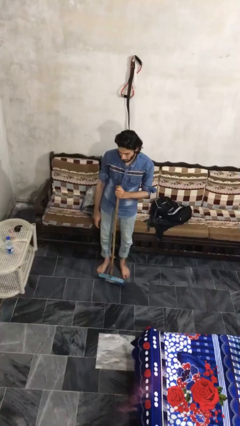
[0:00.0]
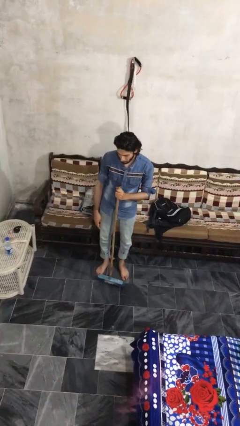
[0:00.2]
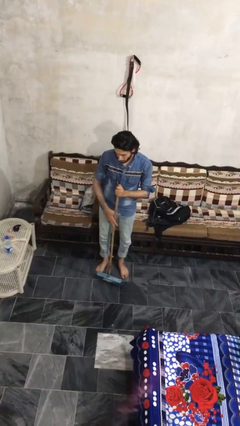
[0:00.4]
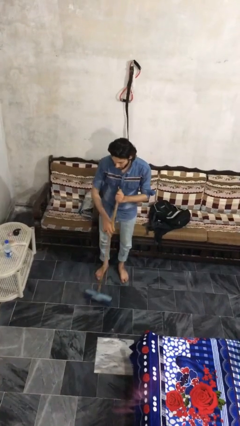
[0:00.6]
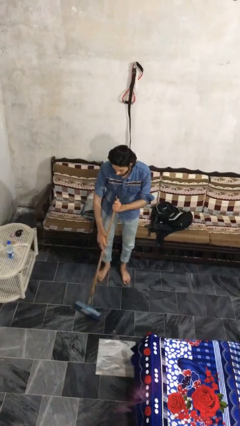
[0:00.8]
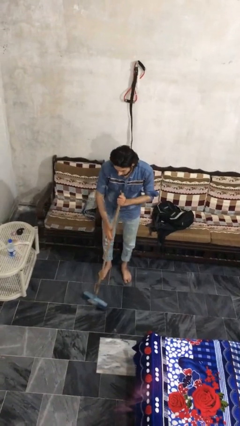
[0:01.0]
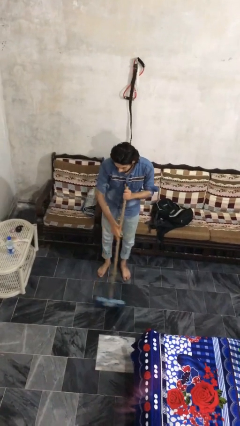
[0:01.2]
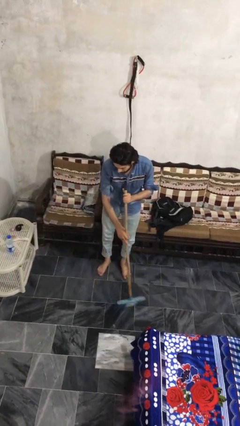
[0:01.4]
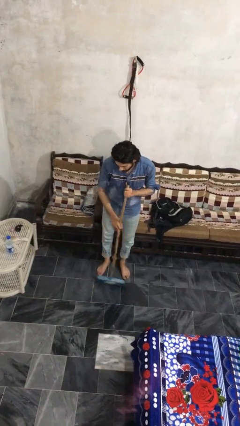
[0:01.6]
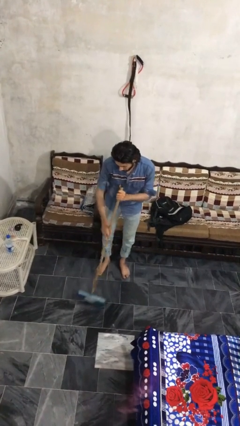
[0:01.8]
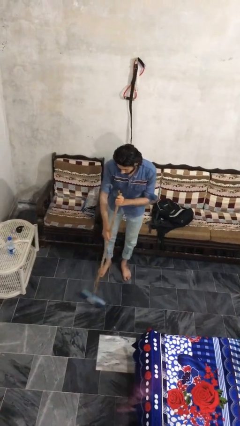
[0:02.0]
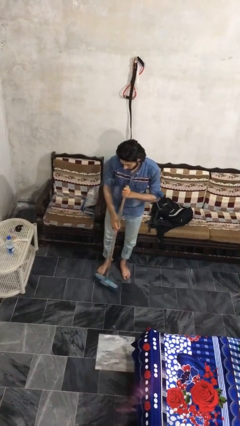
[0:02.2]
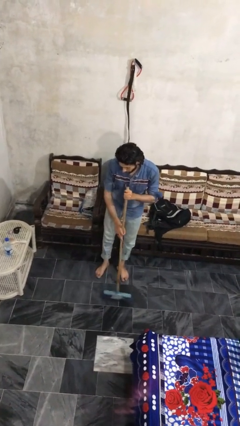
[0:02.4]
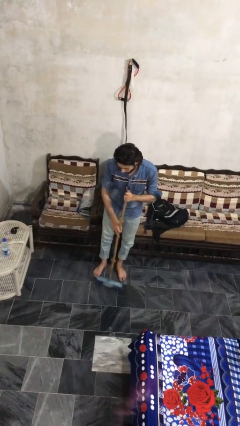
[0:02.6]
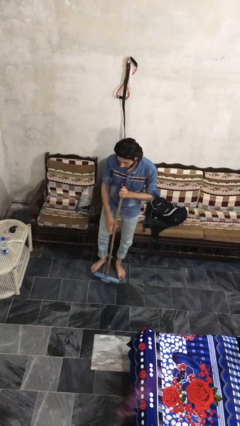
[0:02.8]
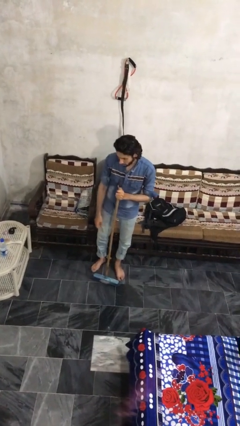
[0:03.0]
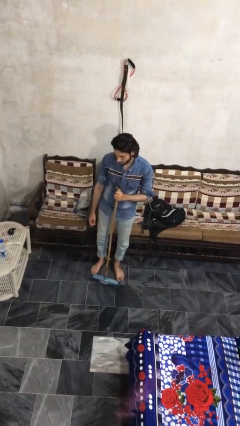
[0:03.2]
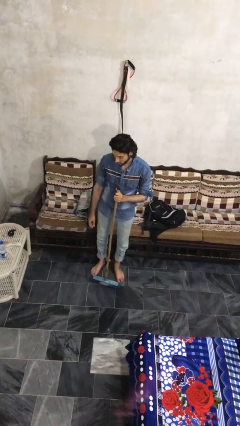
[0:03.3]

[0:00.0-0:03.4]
person sweeps floor

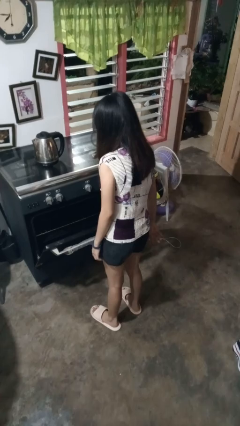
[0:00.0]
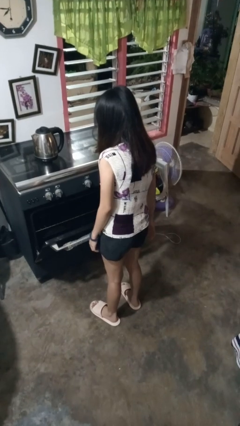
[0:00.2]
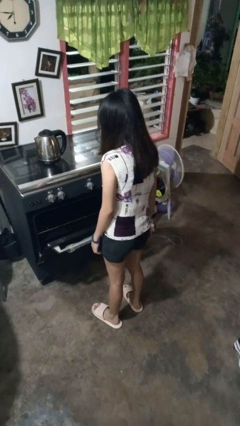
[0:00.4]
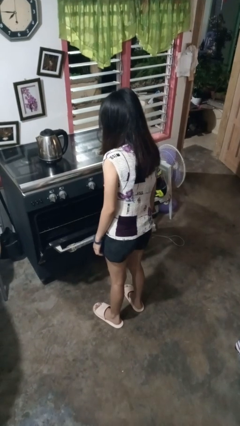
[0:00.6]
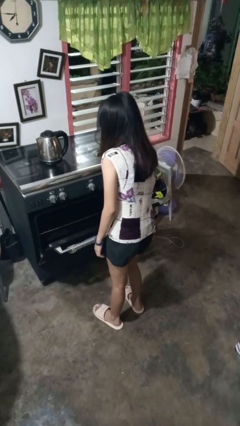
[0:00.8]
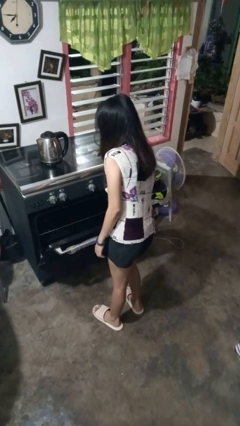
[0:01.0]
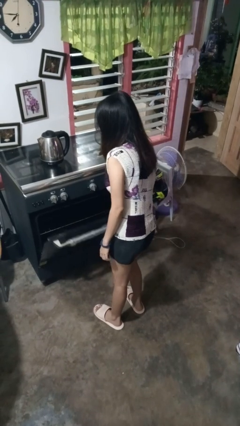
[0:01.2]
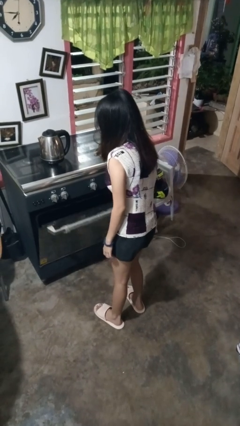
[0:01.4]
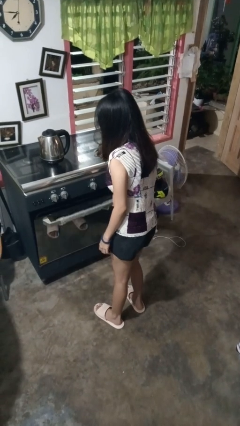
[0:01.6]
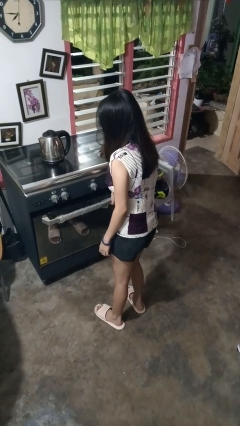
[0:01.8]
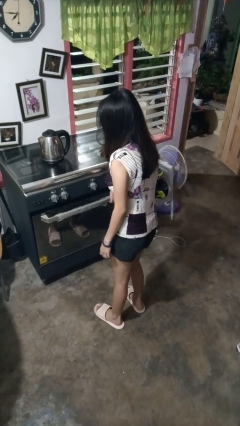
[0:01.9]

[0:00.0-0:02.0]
person closes oven door

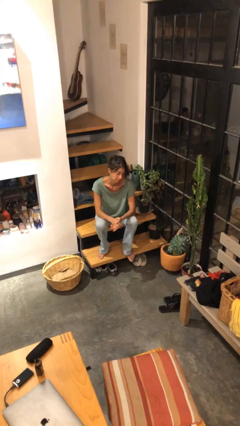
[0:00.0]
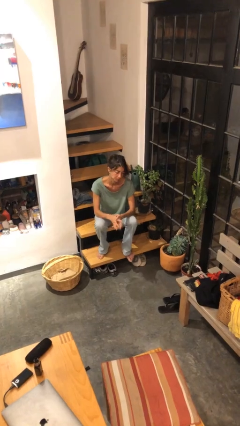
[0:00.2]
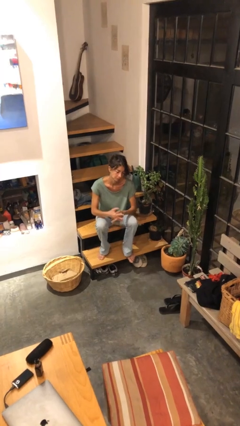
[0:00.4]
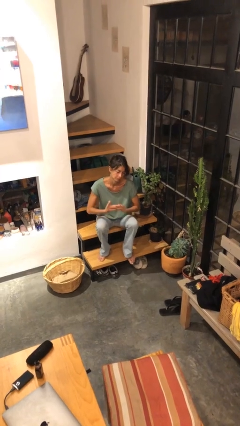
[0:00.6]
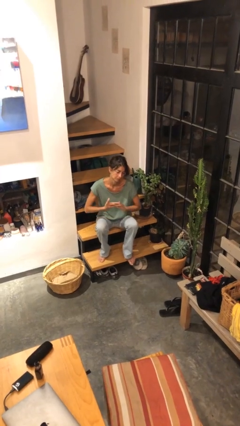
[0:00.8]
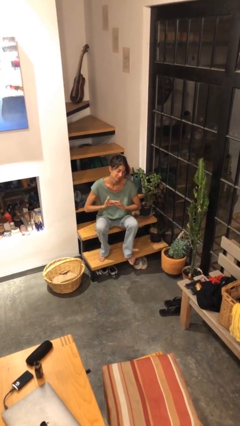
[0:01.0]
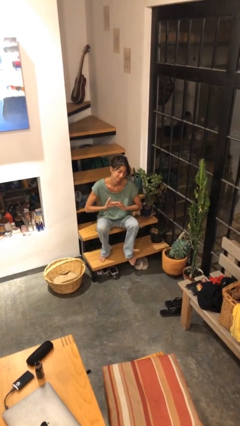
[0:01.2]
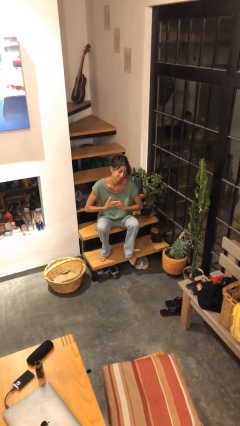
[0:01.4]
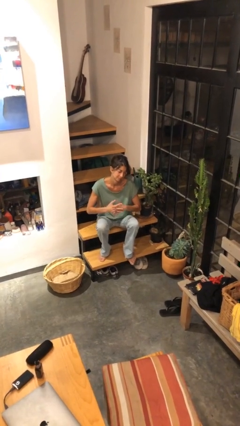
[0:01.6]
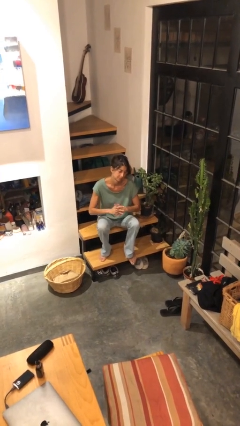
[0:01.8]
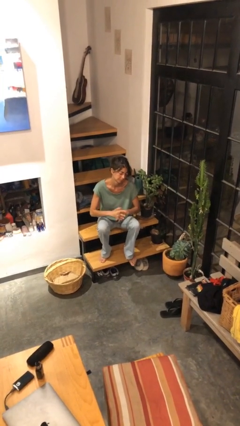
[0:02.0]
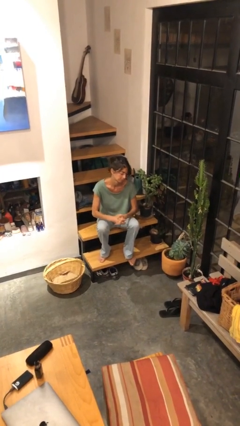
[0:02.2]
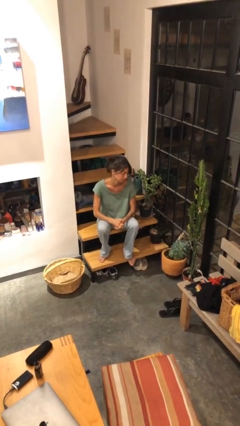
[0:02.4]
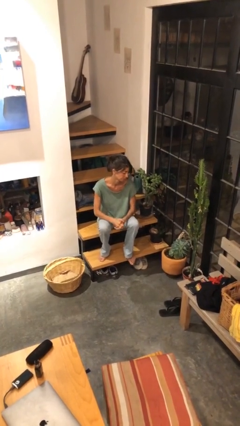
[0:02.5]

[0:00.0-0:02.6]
person cracks knuckles

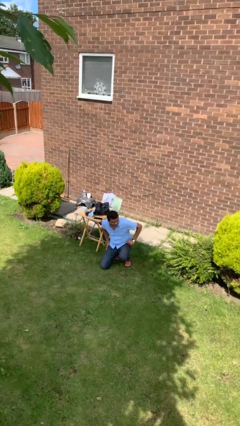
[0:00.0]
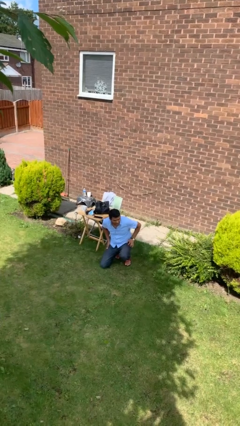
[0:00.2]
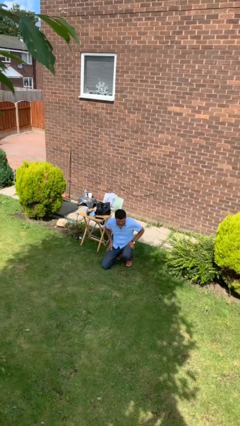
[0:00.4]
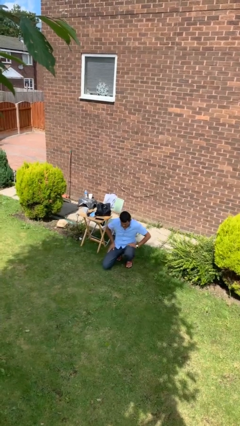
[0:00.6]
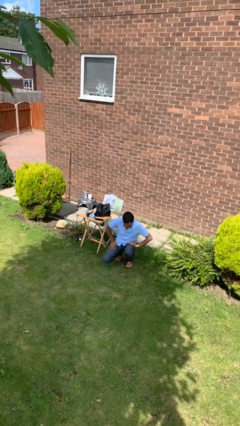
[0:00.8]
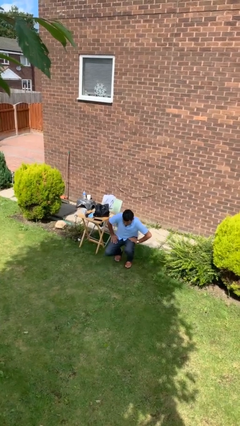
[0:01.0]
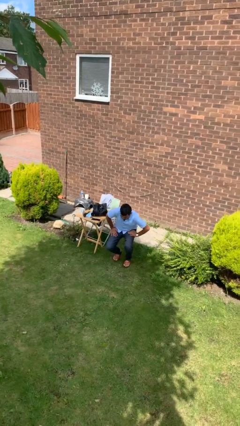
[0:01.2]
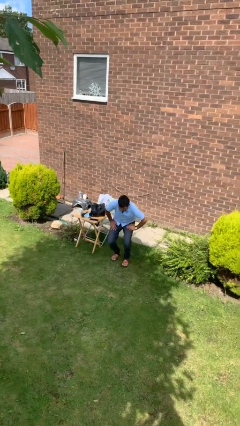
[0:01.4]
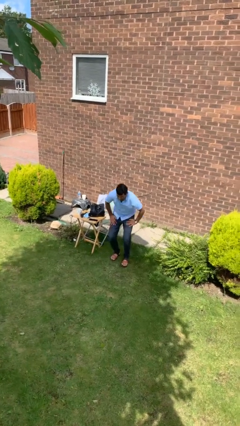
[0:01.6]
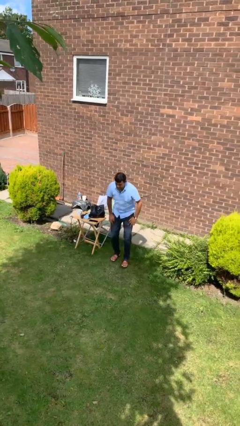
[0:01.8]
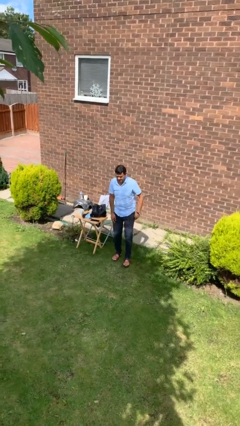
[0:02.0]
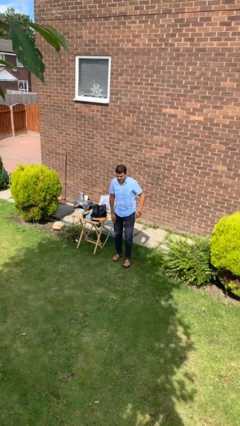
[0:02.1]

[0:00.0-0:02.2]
person stands up from floor

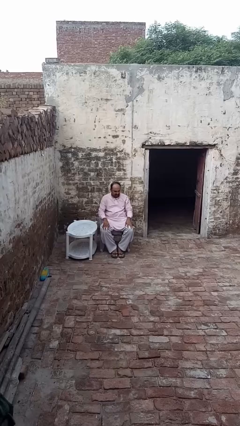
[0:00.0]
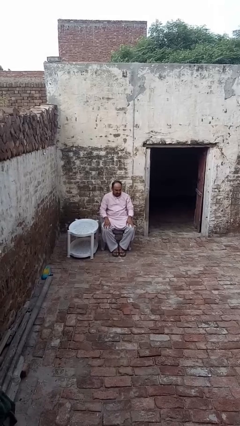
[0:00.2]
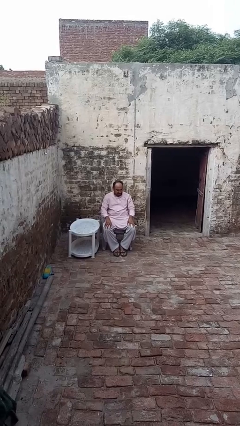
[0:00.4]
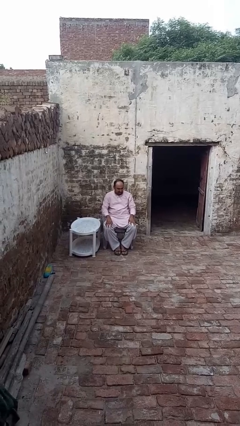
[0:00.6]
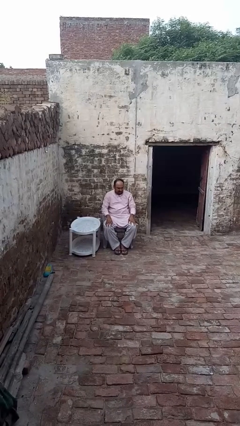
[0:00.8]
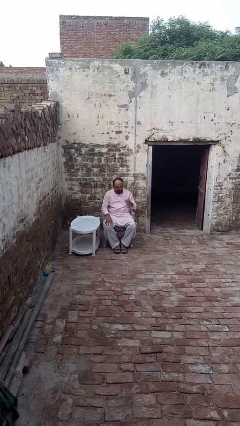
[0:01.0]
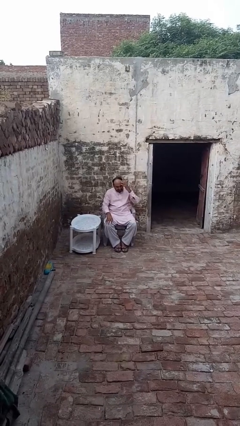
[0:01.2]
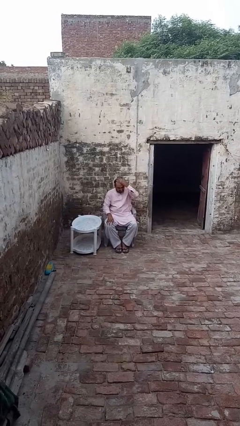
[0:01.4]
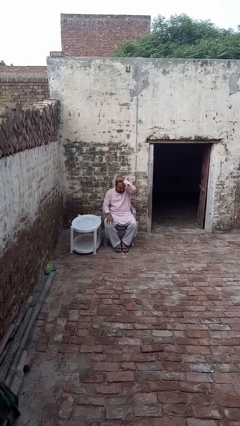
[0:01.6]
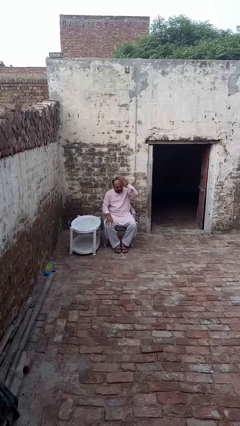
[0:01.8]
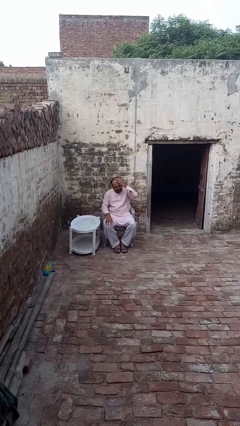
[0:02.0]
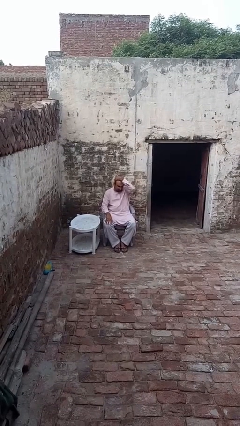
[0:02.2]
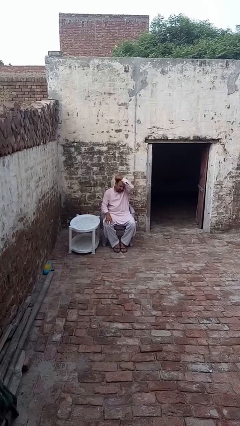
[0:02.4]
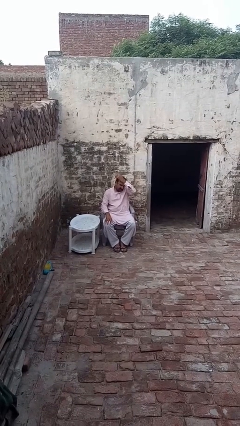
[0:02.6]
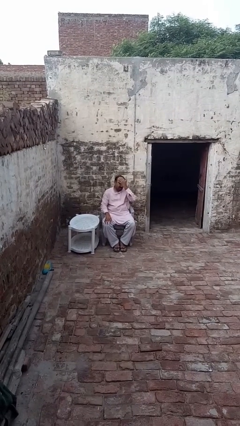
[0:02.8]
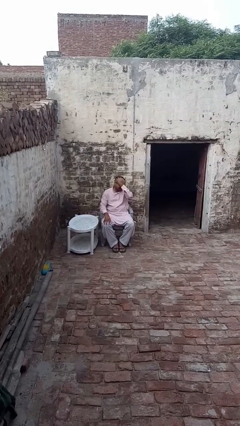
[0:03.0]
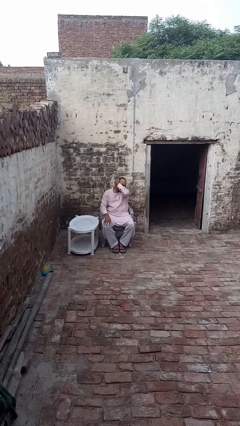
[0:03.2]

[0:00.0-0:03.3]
person strokes hair

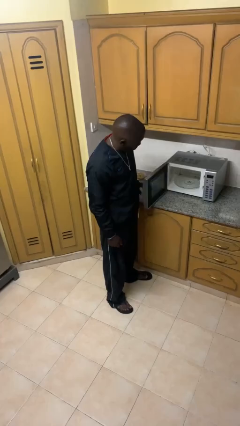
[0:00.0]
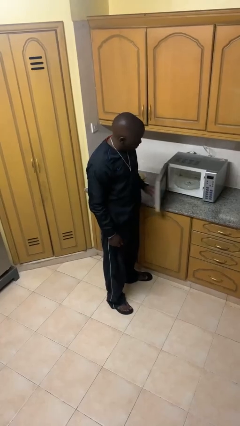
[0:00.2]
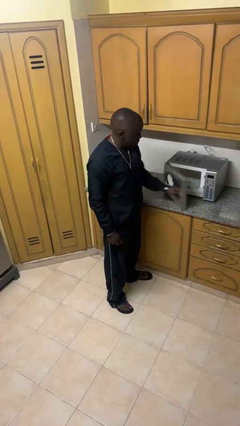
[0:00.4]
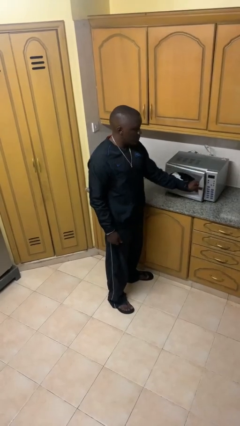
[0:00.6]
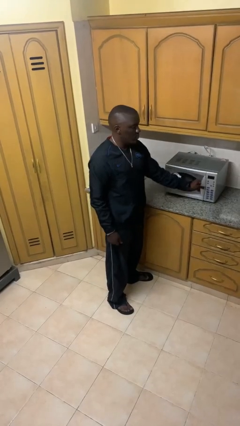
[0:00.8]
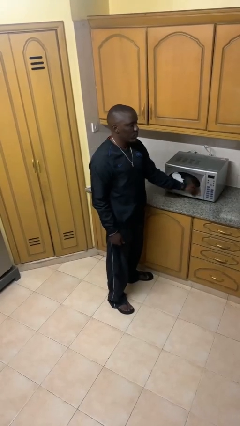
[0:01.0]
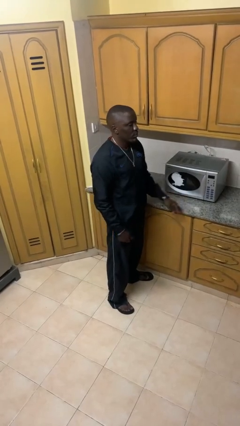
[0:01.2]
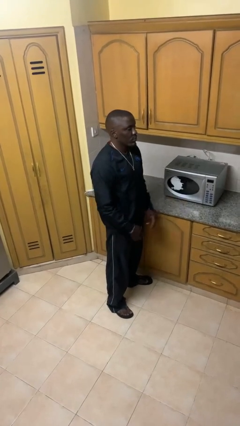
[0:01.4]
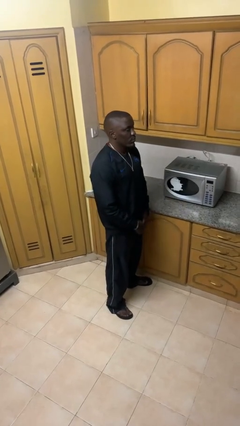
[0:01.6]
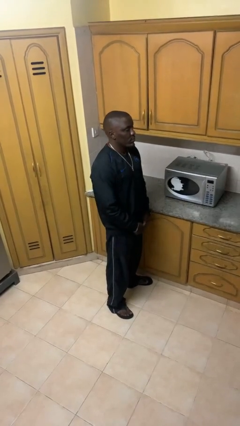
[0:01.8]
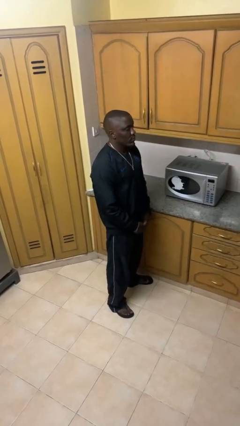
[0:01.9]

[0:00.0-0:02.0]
person closes microwave

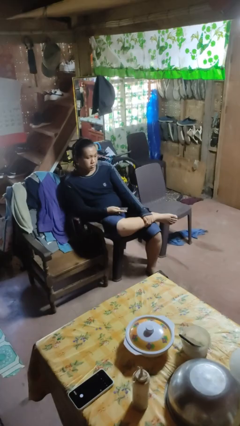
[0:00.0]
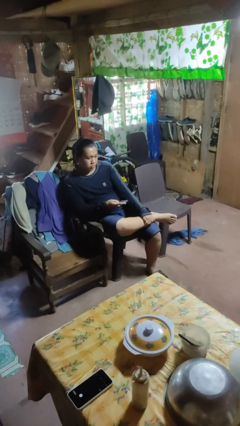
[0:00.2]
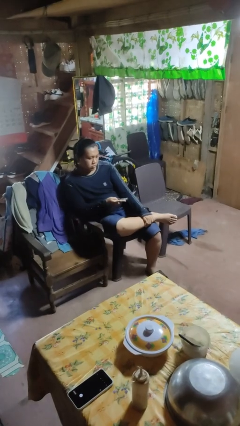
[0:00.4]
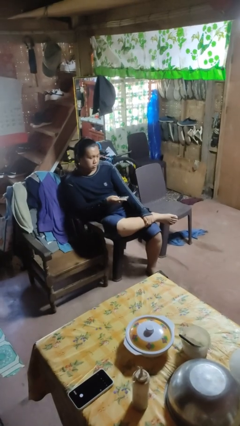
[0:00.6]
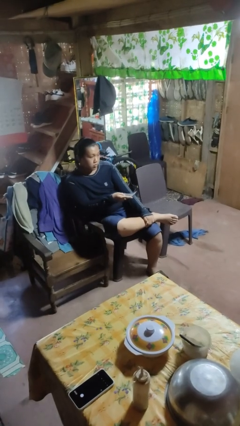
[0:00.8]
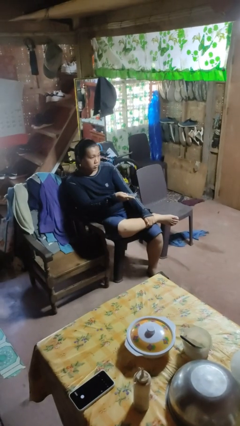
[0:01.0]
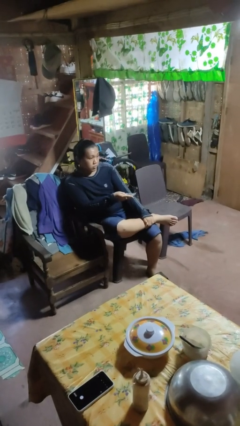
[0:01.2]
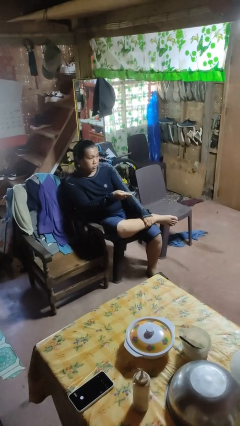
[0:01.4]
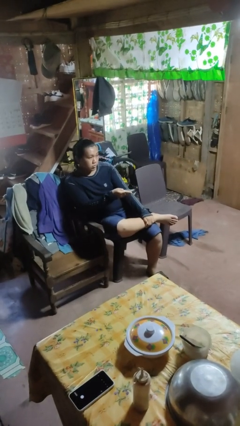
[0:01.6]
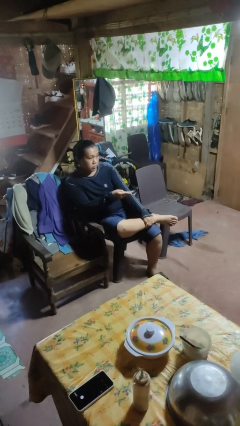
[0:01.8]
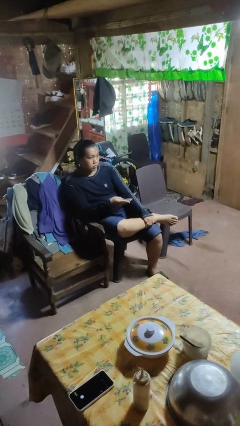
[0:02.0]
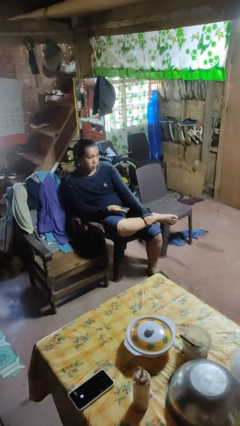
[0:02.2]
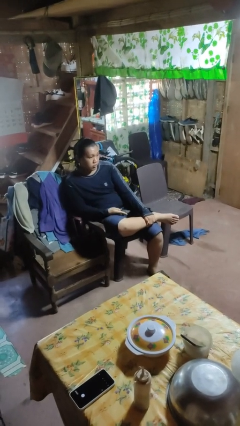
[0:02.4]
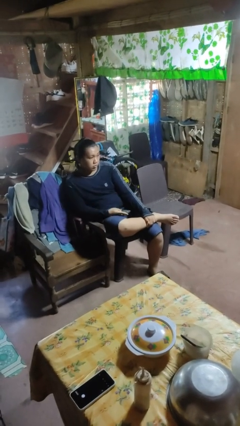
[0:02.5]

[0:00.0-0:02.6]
person uses television remote
